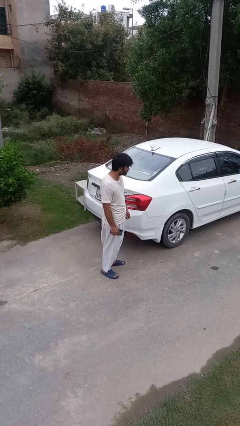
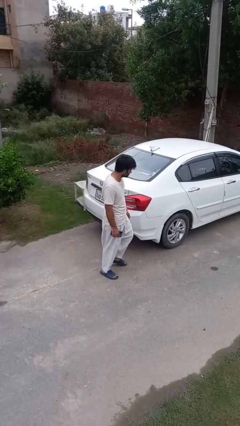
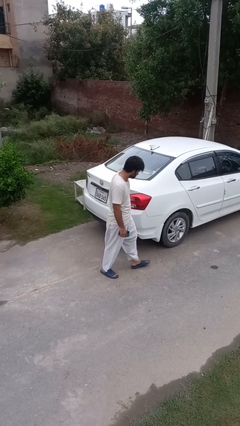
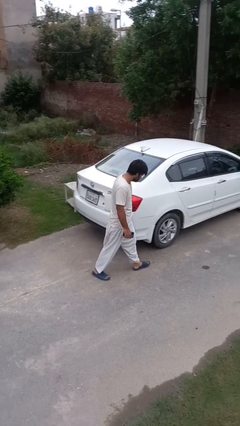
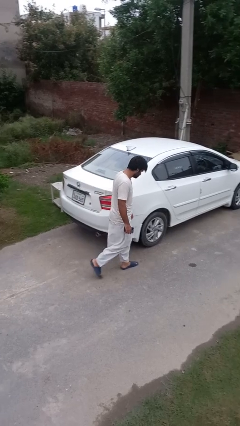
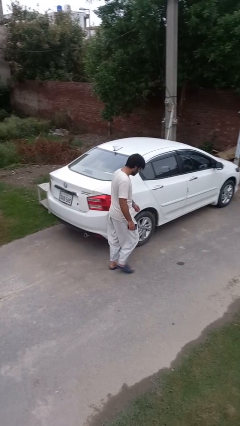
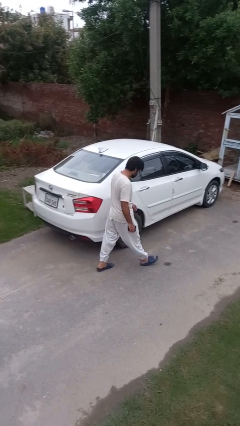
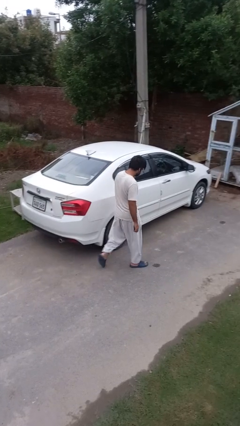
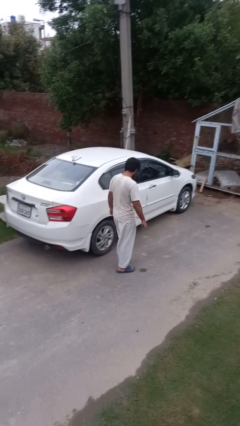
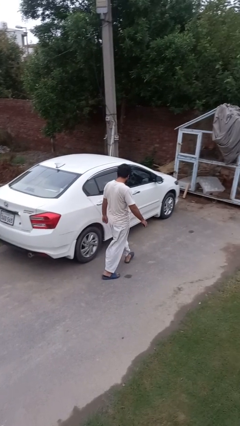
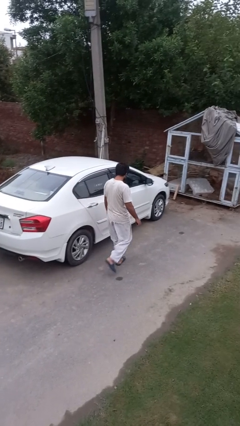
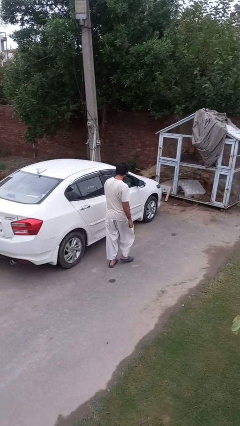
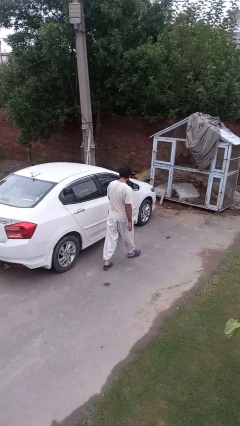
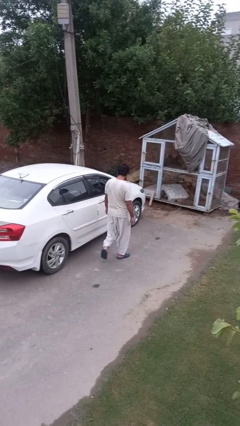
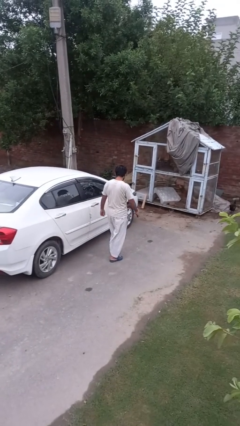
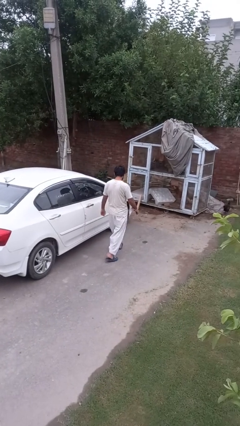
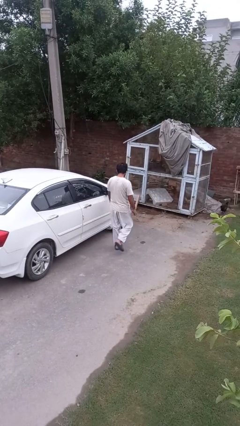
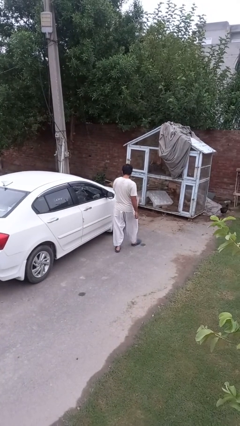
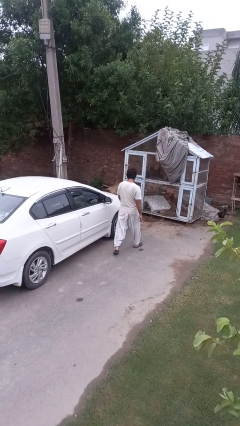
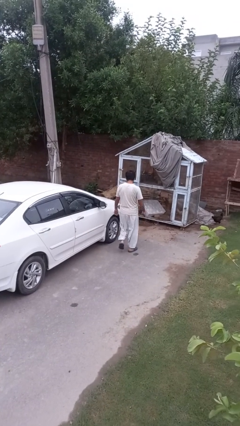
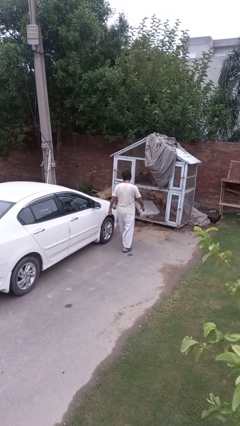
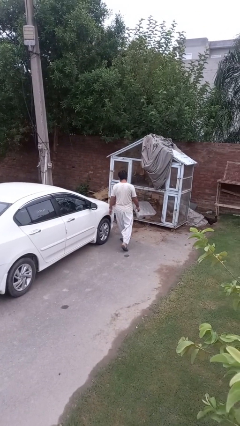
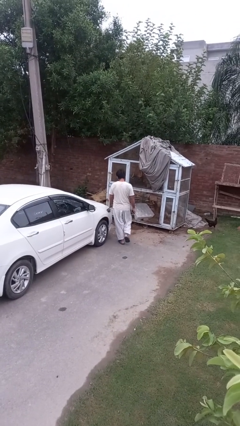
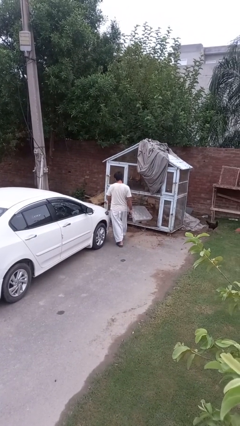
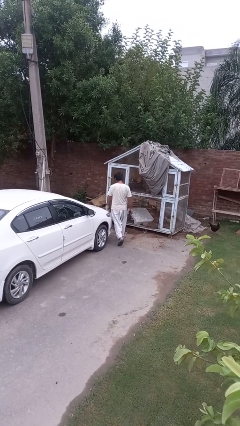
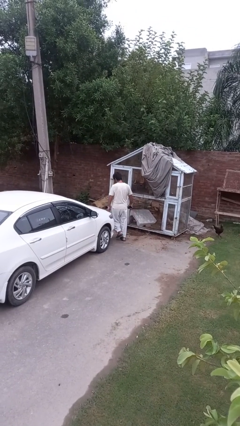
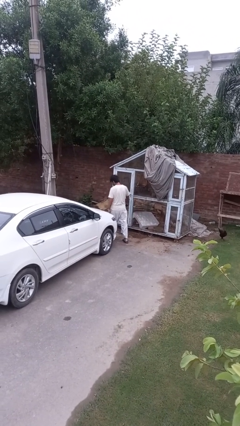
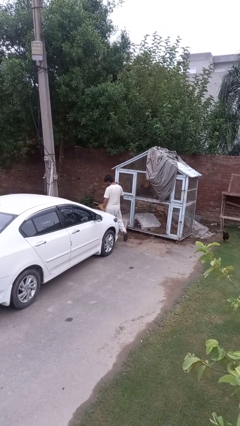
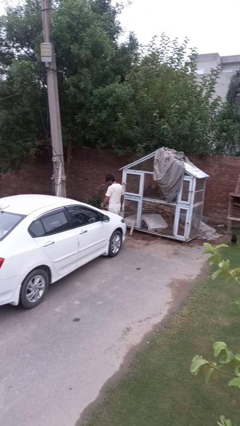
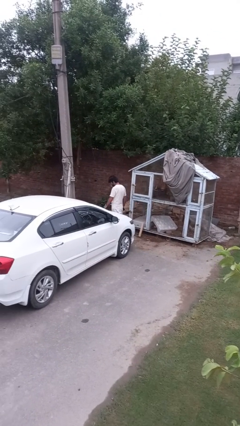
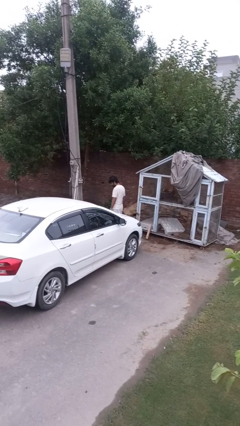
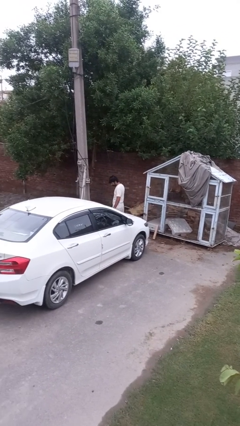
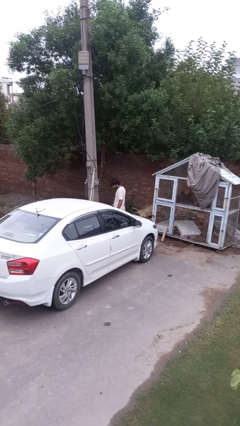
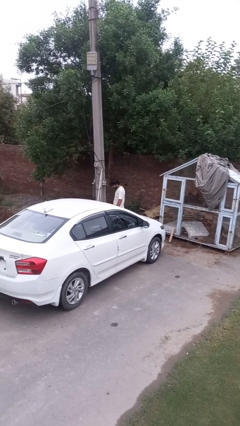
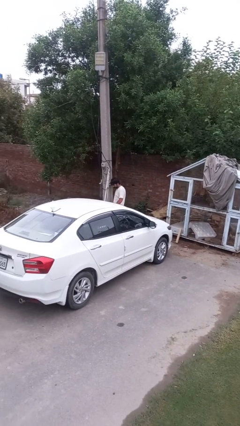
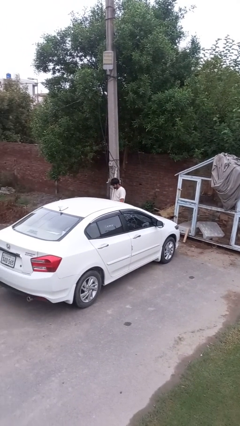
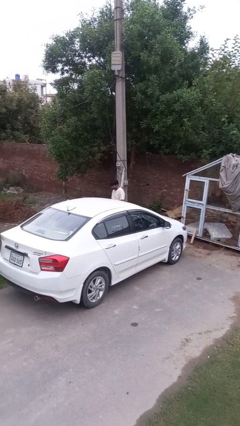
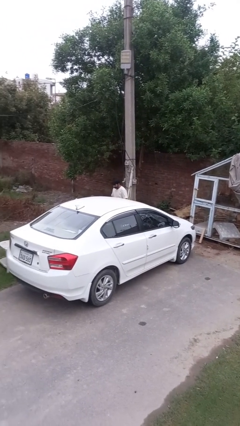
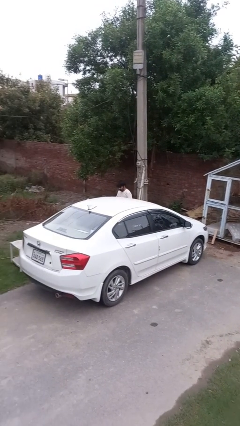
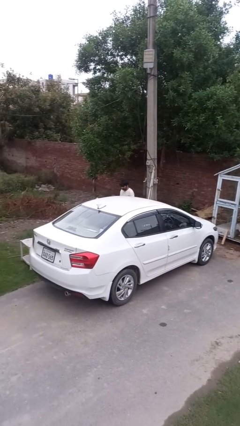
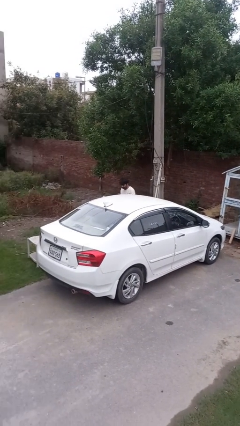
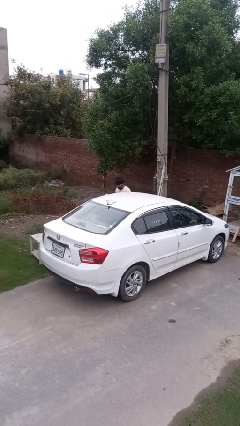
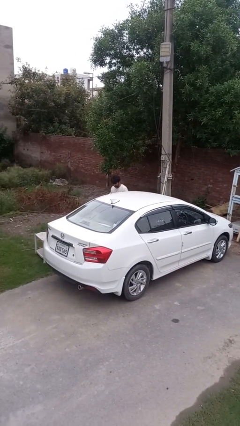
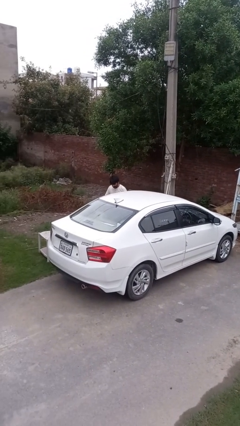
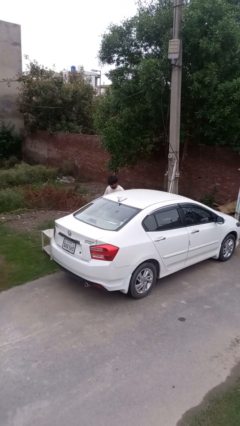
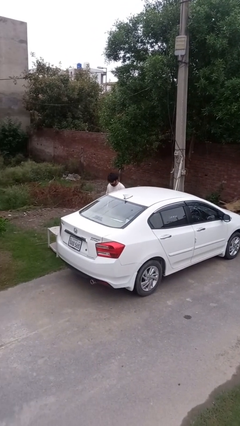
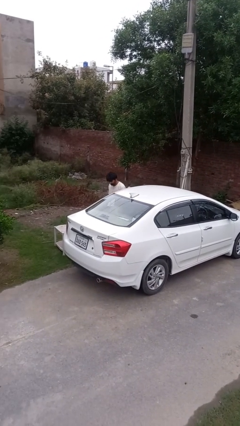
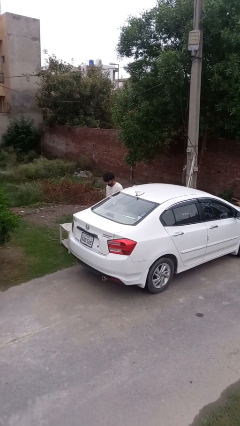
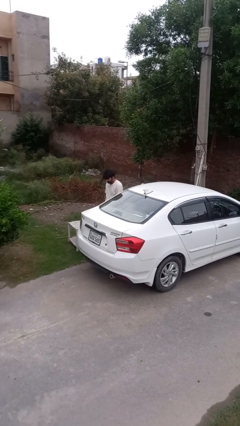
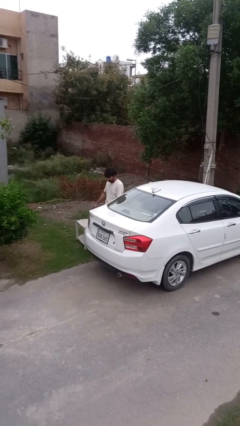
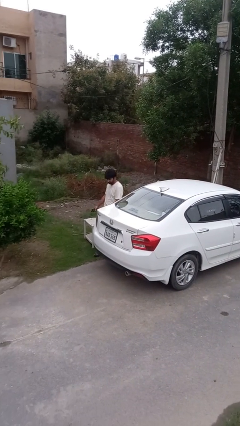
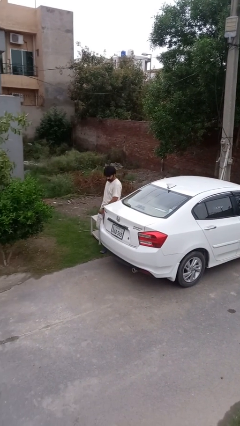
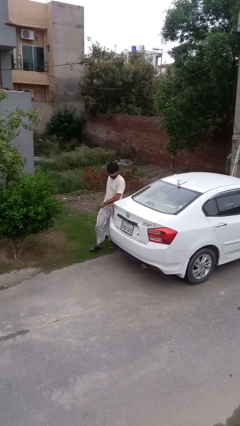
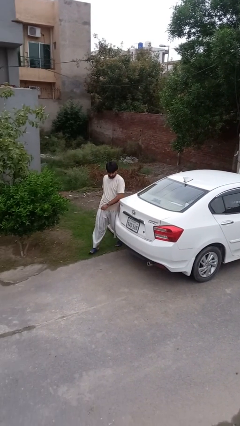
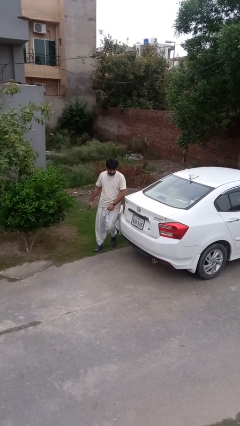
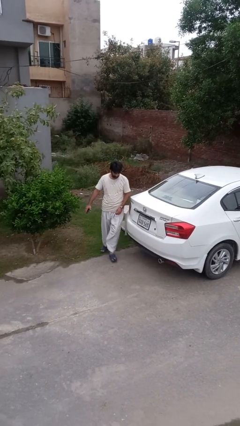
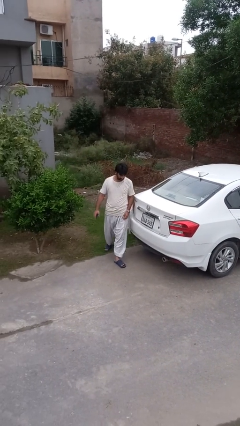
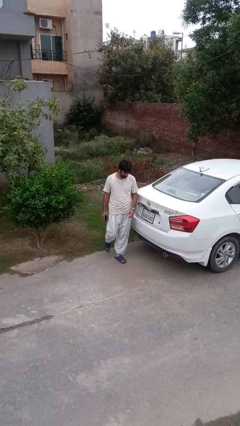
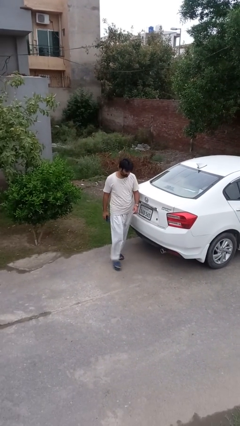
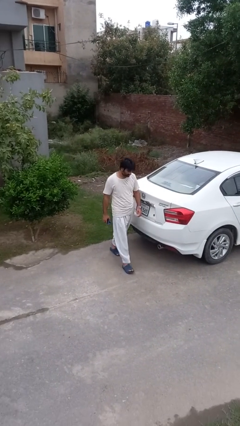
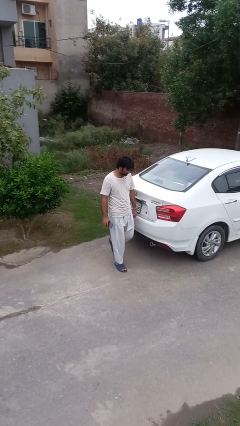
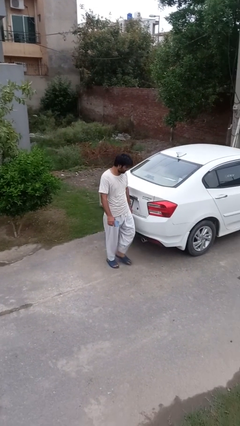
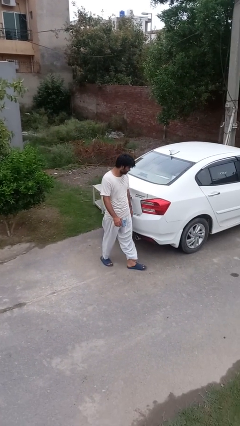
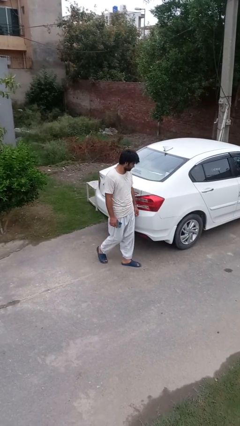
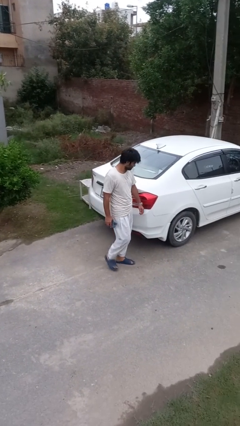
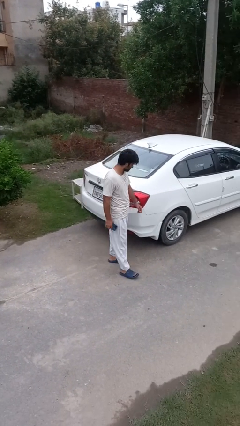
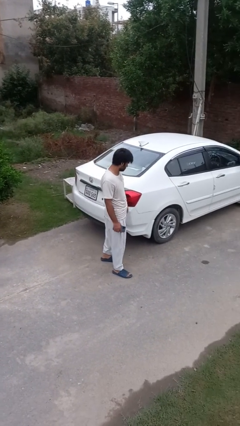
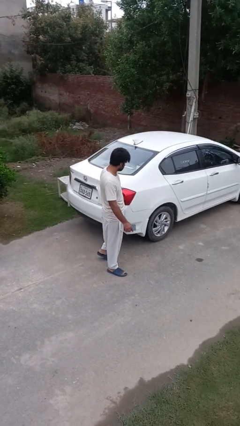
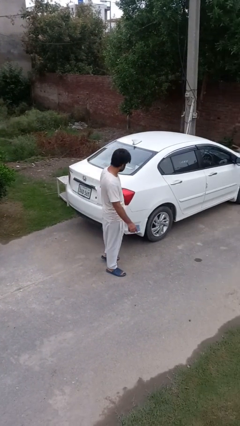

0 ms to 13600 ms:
person walks around car

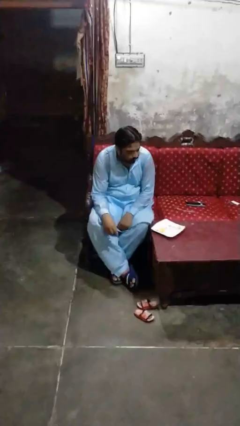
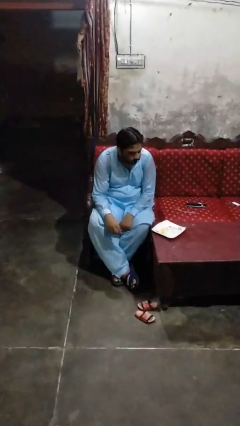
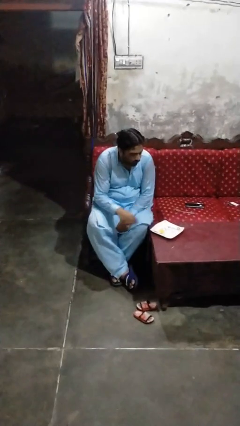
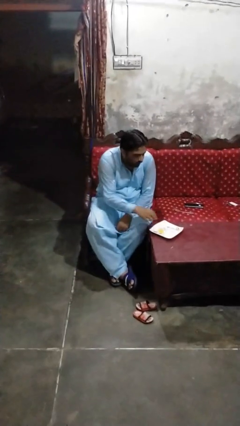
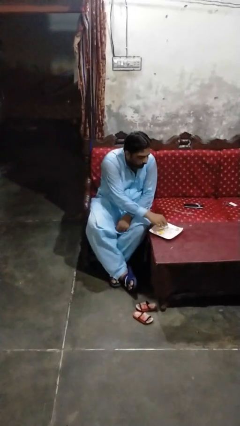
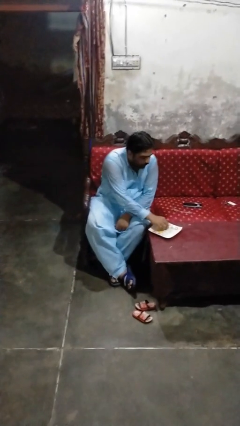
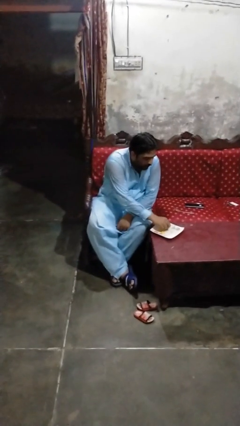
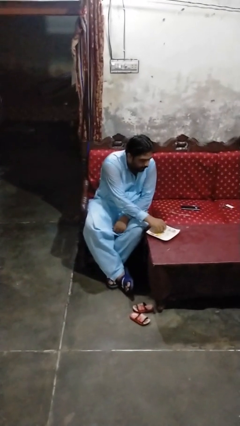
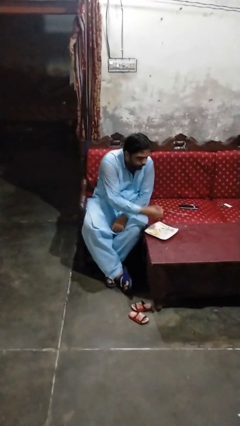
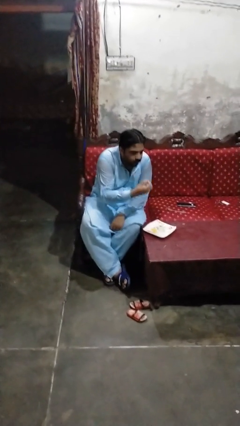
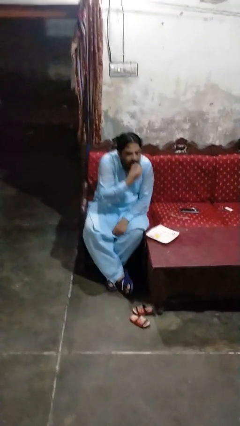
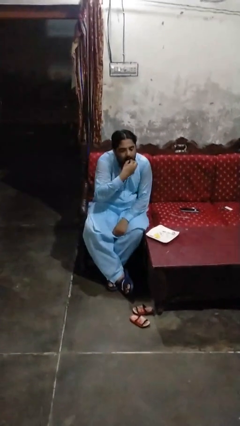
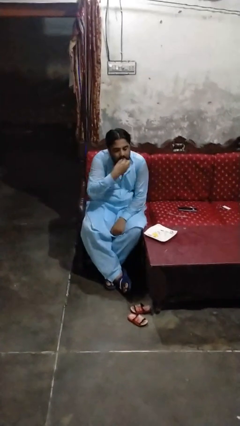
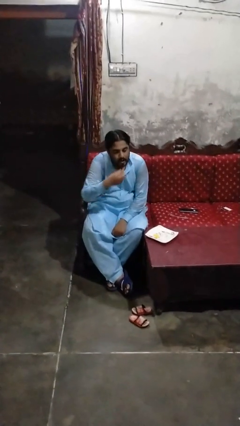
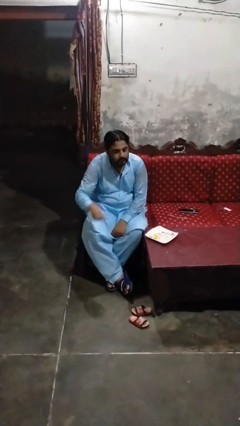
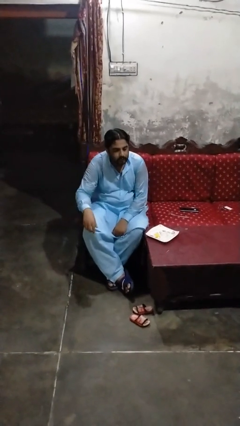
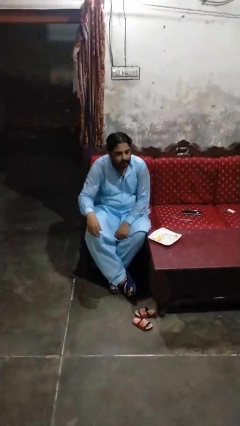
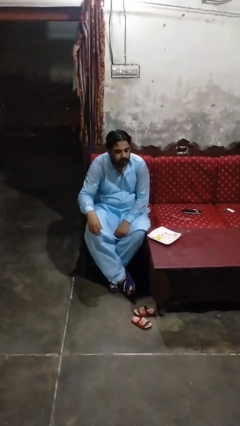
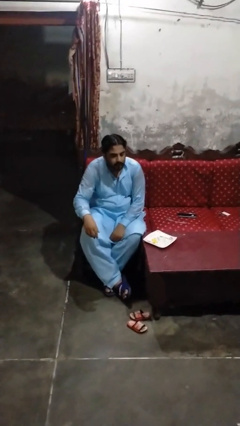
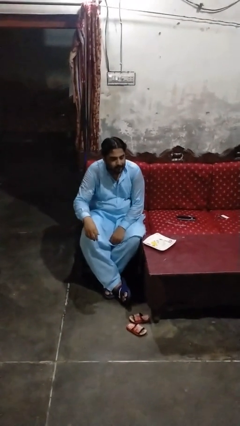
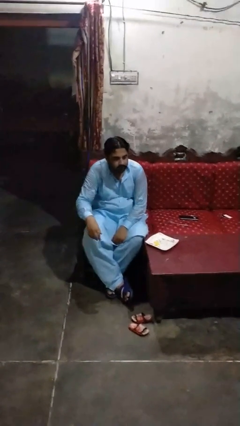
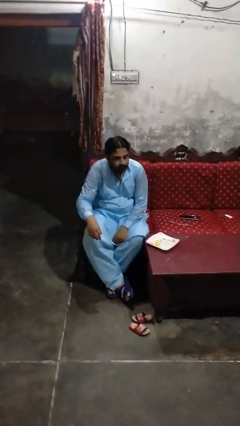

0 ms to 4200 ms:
person eats with hands
